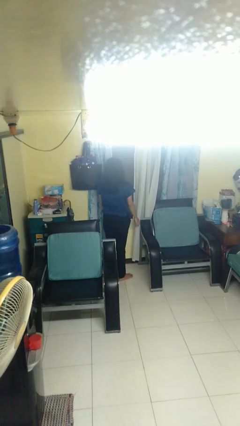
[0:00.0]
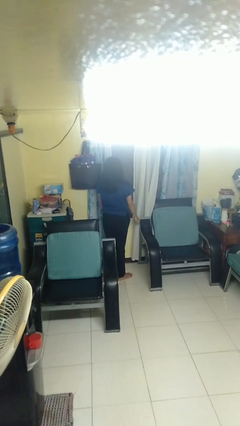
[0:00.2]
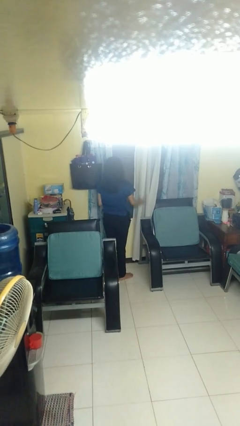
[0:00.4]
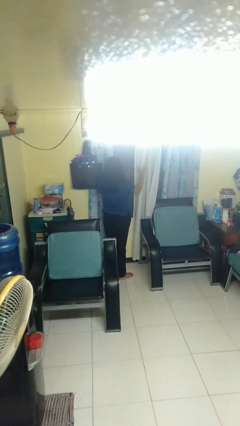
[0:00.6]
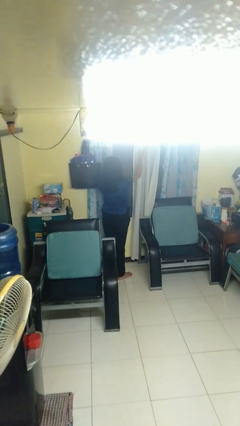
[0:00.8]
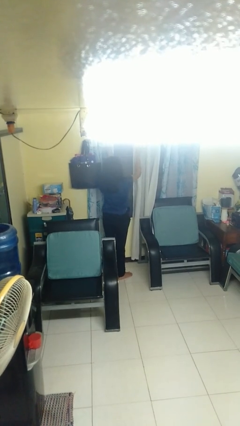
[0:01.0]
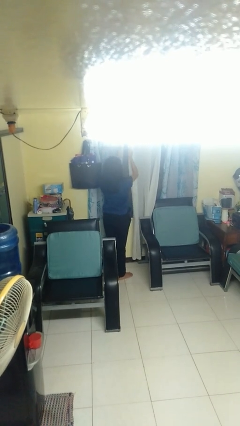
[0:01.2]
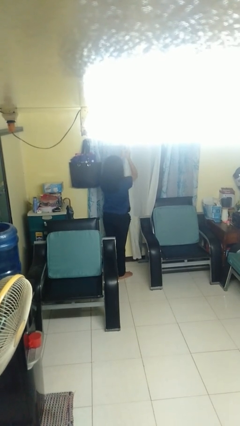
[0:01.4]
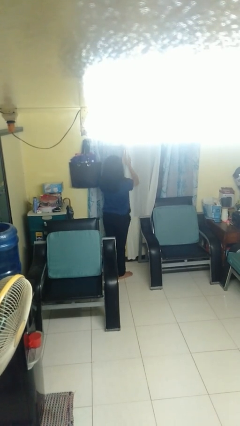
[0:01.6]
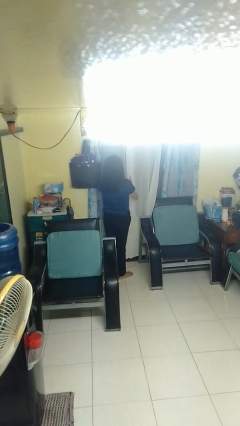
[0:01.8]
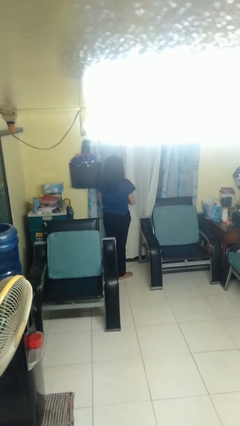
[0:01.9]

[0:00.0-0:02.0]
person closes curtains

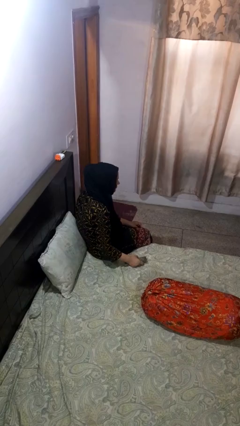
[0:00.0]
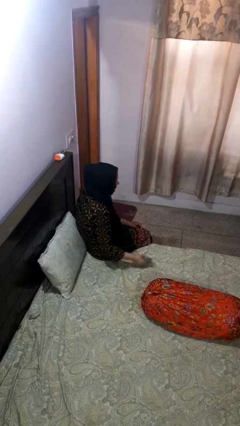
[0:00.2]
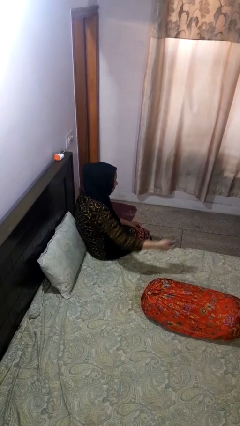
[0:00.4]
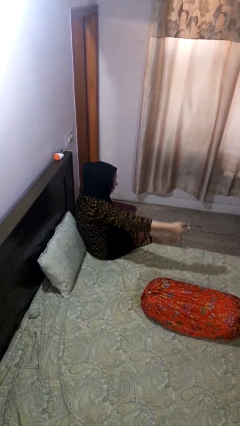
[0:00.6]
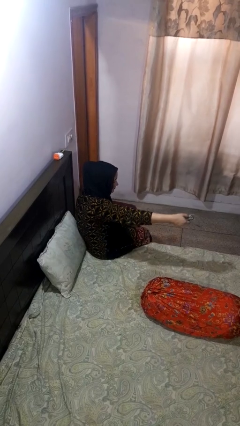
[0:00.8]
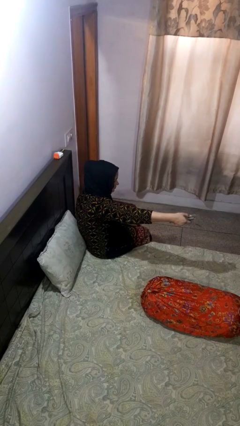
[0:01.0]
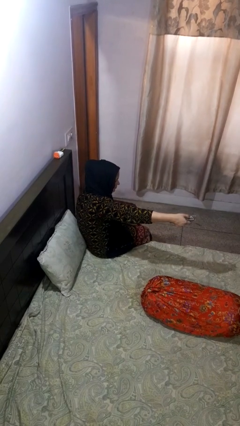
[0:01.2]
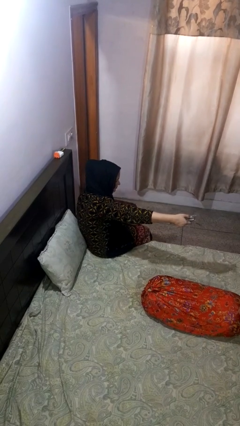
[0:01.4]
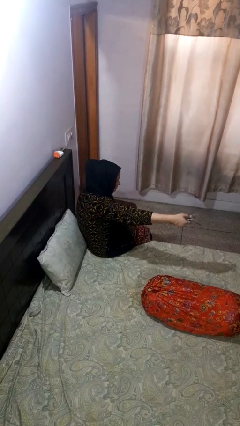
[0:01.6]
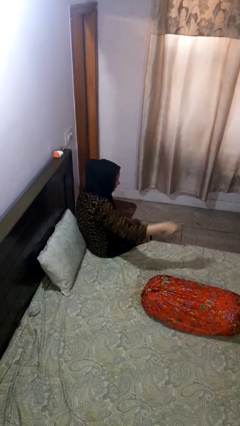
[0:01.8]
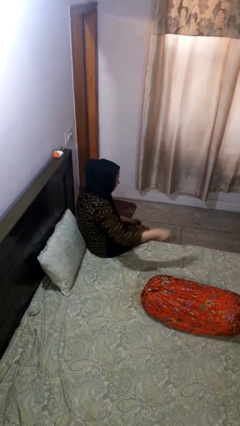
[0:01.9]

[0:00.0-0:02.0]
person uses television remote

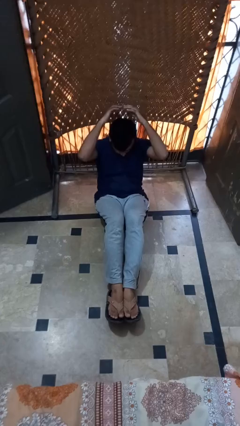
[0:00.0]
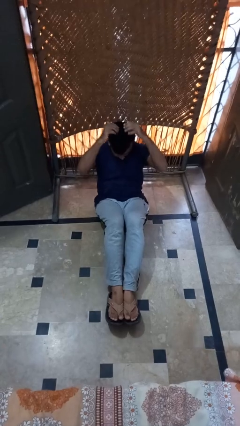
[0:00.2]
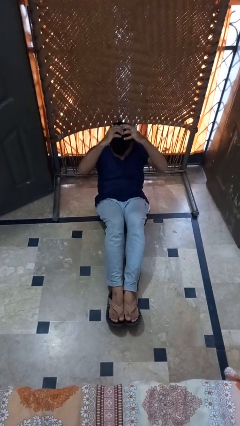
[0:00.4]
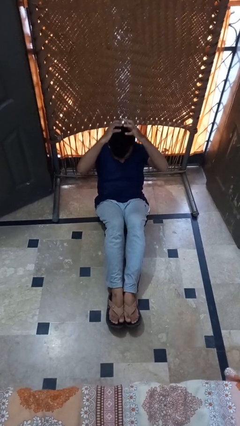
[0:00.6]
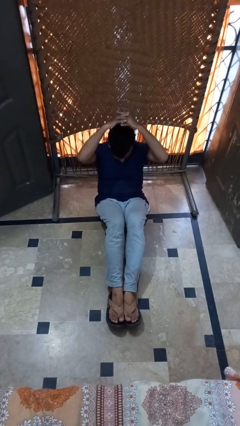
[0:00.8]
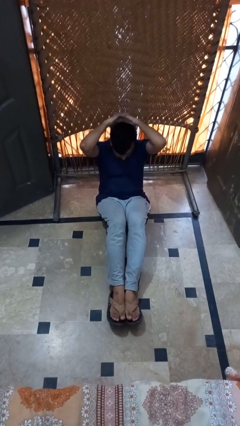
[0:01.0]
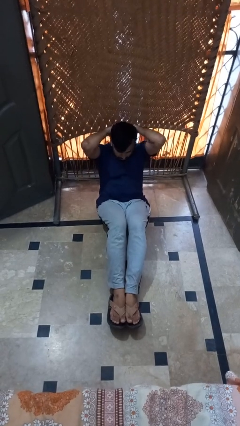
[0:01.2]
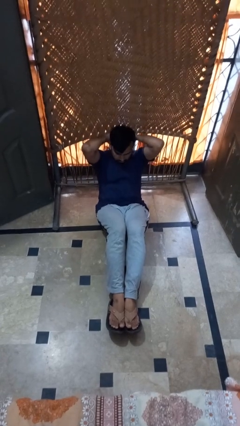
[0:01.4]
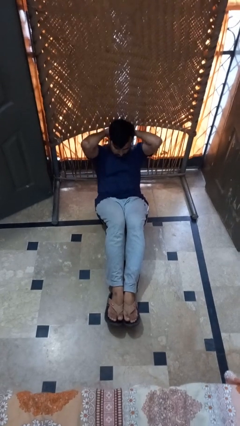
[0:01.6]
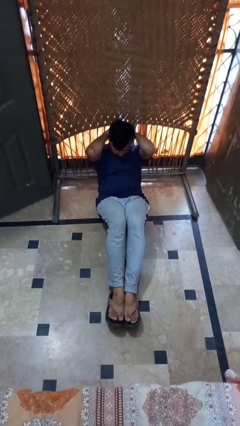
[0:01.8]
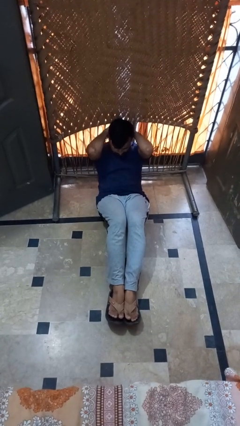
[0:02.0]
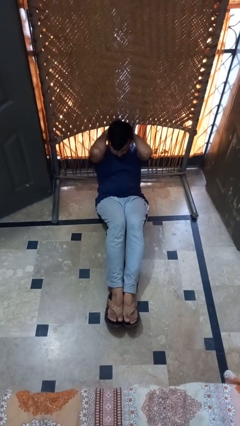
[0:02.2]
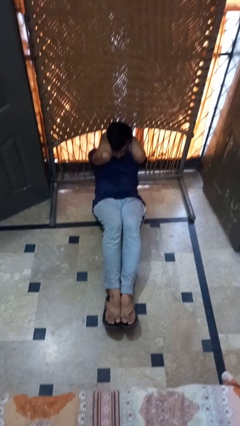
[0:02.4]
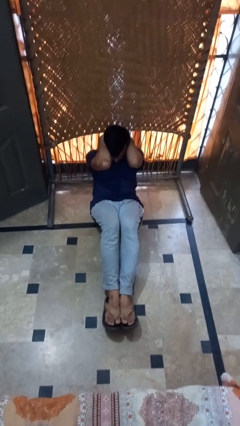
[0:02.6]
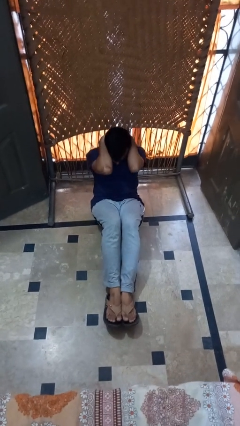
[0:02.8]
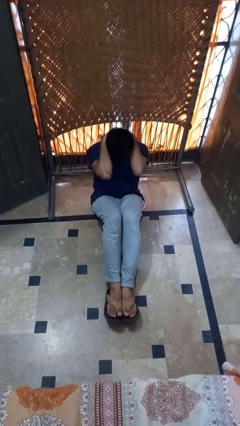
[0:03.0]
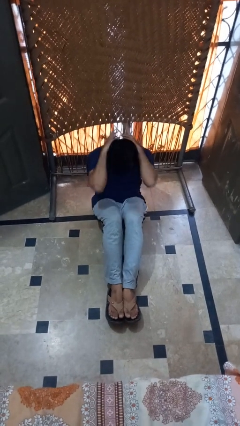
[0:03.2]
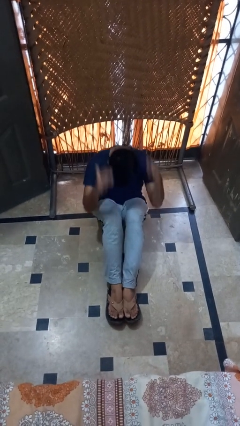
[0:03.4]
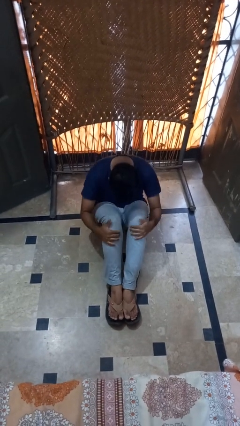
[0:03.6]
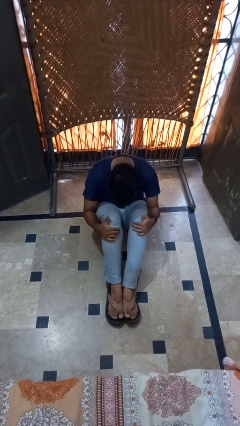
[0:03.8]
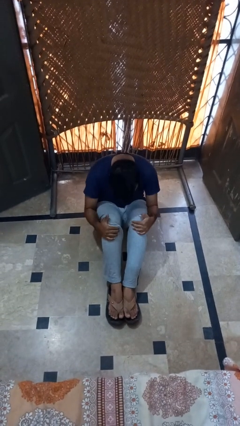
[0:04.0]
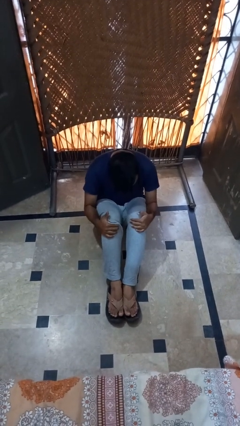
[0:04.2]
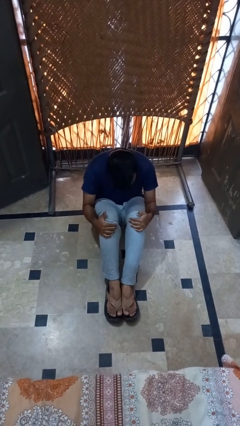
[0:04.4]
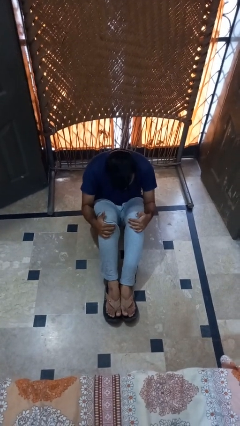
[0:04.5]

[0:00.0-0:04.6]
person exercises with situp

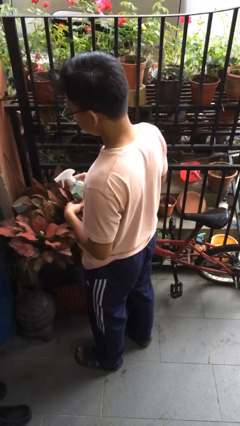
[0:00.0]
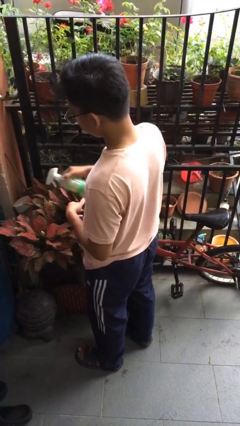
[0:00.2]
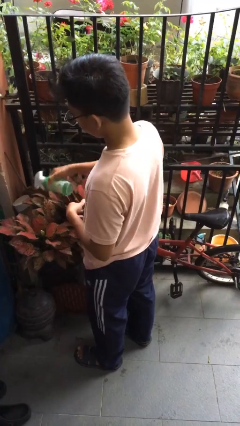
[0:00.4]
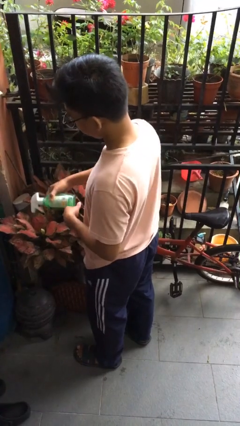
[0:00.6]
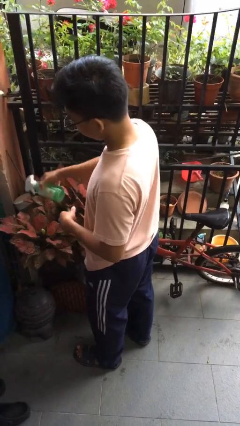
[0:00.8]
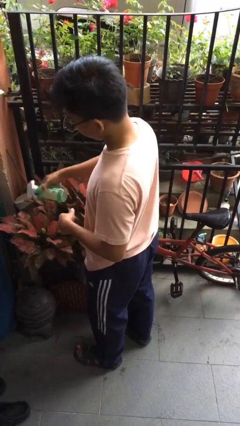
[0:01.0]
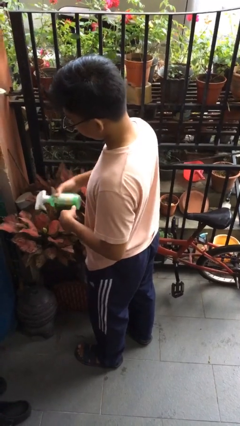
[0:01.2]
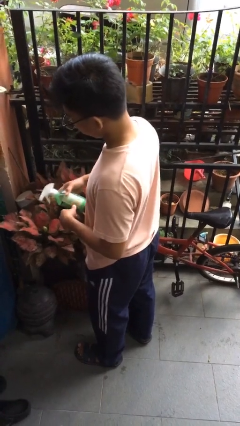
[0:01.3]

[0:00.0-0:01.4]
person waters houseplant

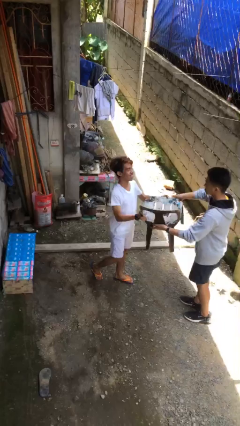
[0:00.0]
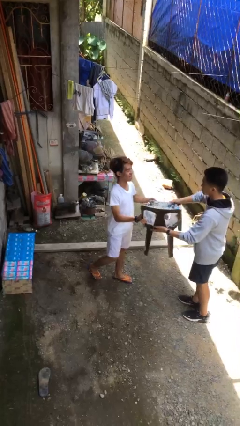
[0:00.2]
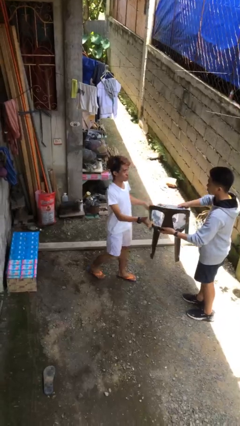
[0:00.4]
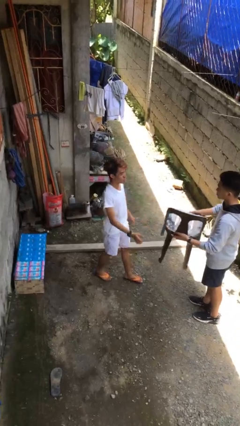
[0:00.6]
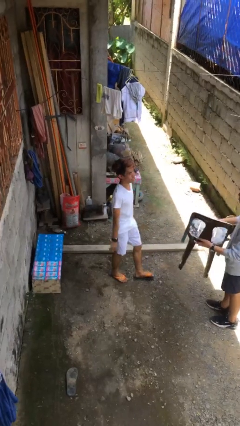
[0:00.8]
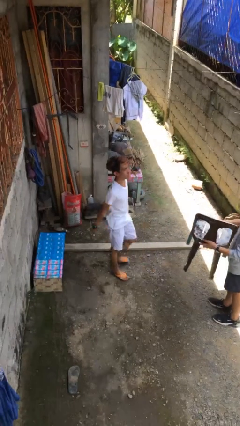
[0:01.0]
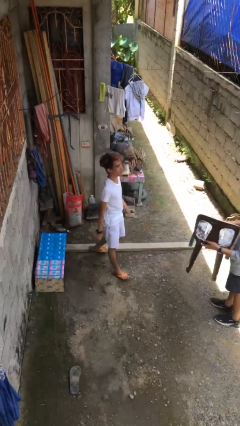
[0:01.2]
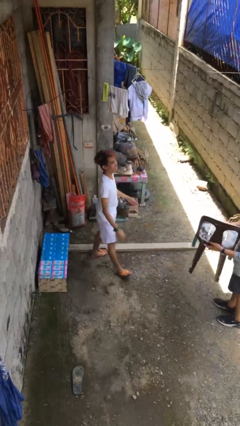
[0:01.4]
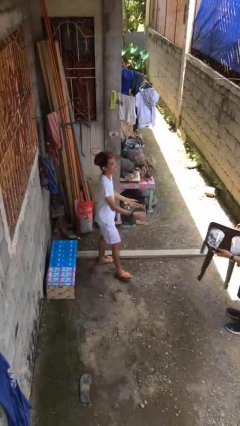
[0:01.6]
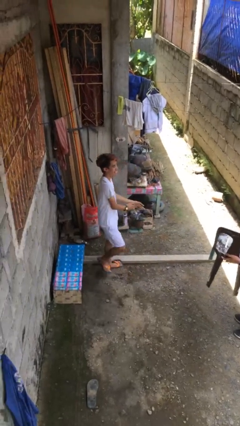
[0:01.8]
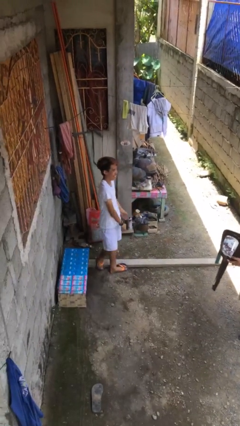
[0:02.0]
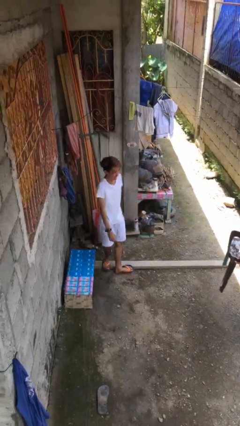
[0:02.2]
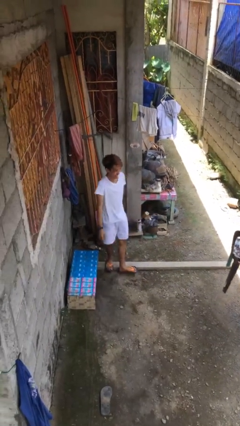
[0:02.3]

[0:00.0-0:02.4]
person transfers object to person

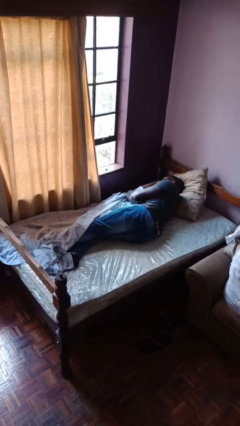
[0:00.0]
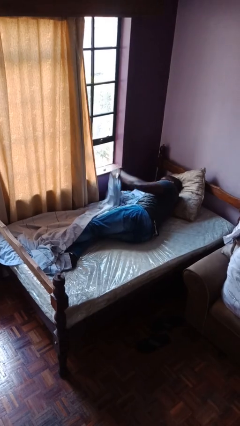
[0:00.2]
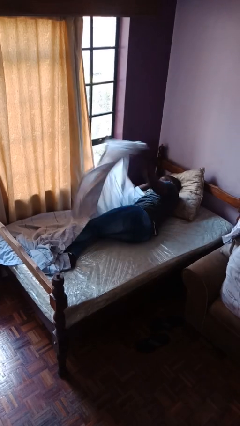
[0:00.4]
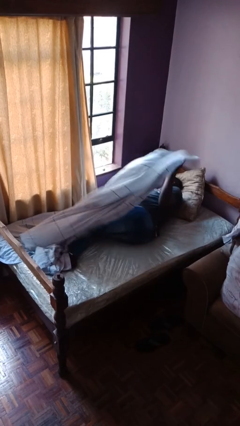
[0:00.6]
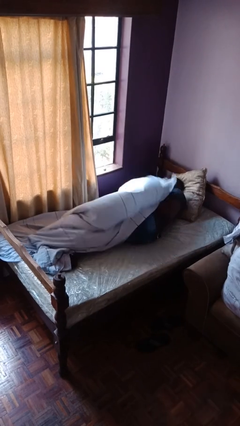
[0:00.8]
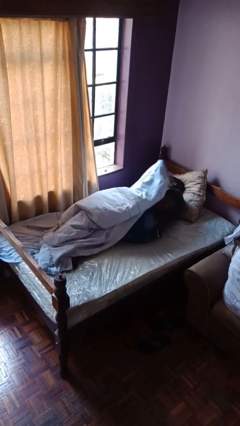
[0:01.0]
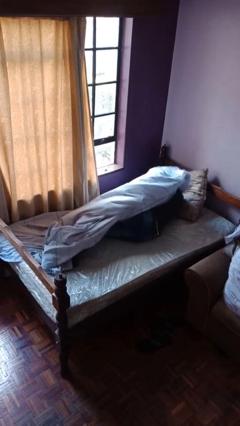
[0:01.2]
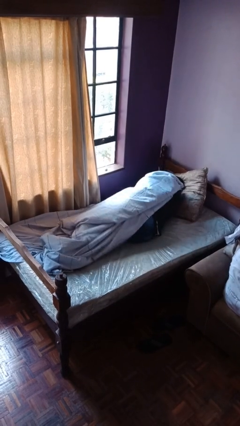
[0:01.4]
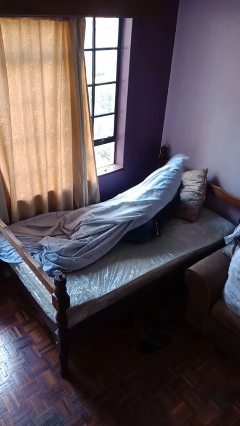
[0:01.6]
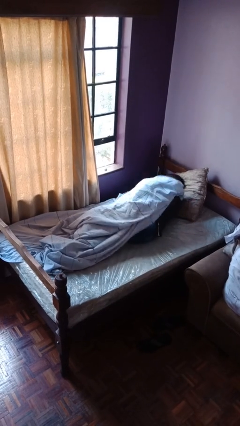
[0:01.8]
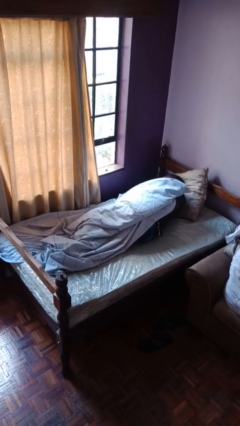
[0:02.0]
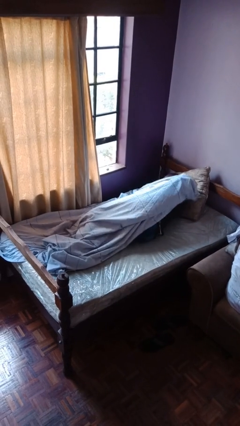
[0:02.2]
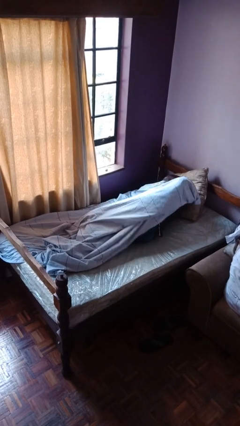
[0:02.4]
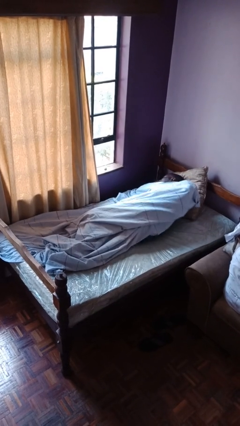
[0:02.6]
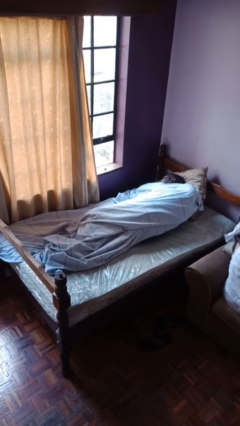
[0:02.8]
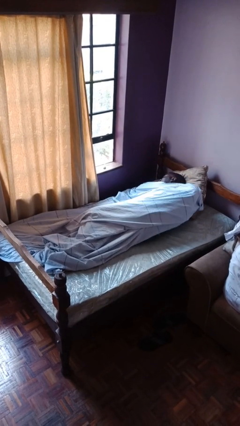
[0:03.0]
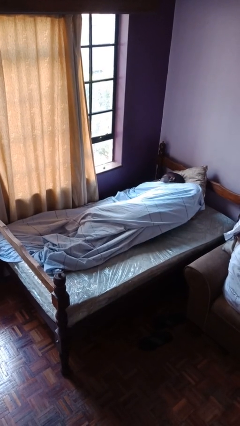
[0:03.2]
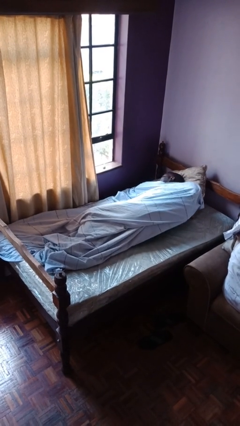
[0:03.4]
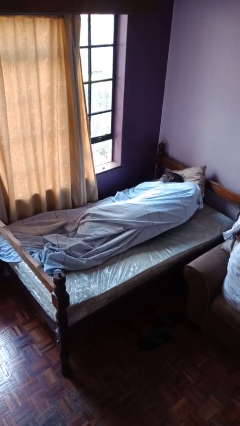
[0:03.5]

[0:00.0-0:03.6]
person covers with bedsheets

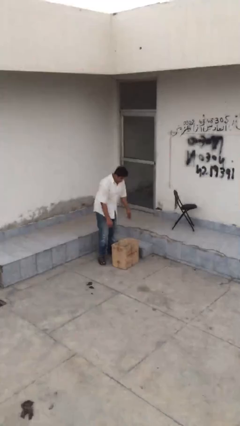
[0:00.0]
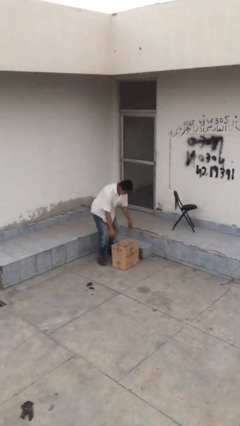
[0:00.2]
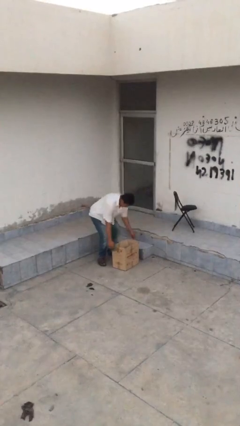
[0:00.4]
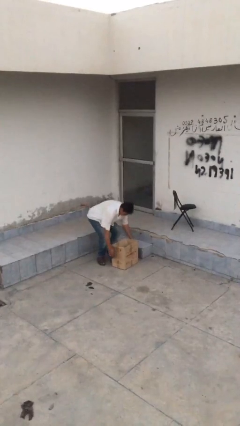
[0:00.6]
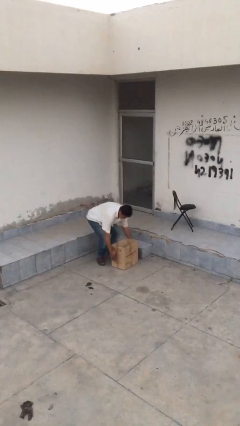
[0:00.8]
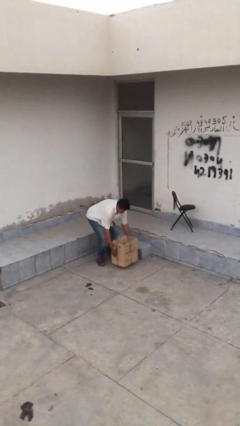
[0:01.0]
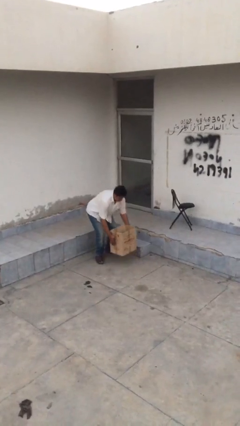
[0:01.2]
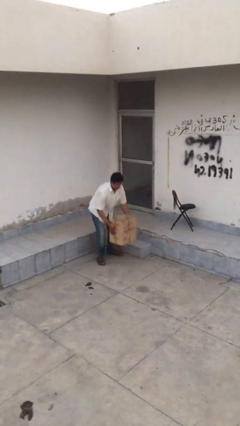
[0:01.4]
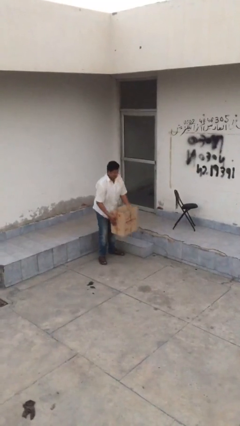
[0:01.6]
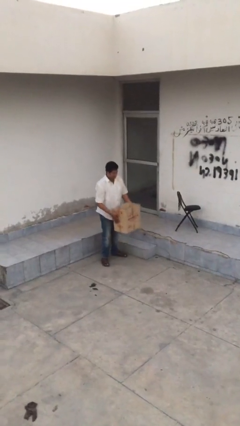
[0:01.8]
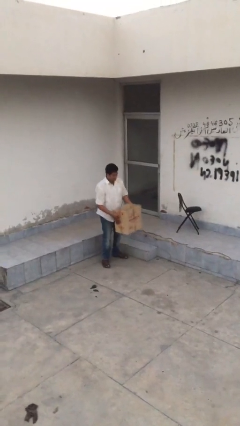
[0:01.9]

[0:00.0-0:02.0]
person picks up object from floor
